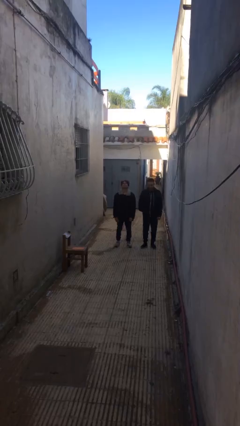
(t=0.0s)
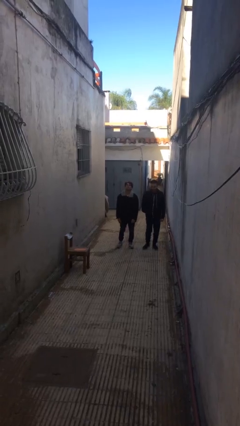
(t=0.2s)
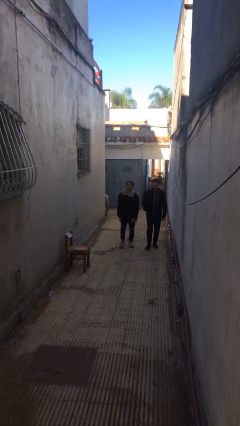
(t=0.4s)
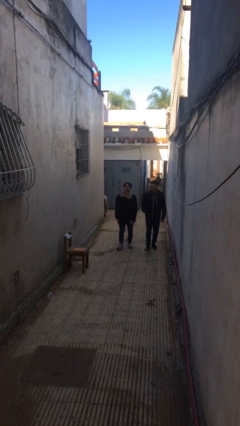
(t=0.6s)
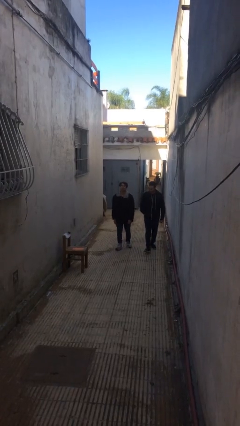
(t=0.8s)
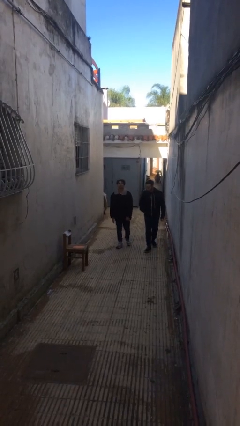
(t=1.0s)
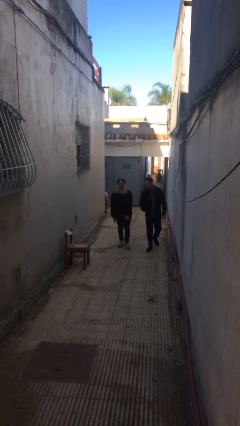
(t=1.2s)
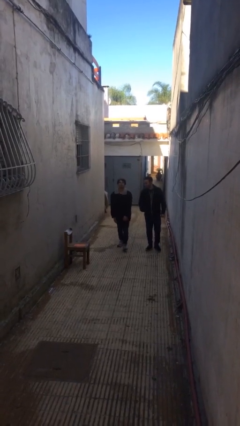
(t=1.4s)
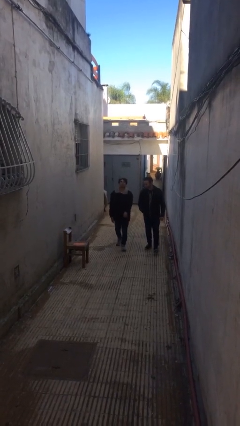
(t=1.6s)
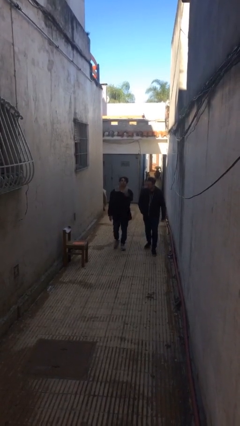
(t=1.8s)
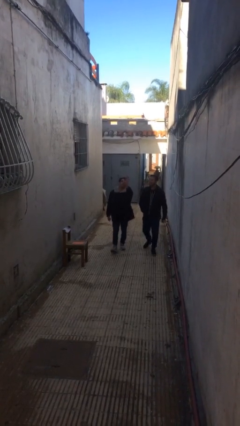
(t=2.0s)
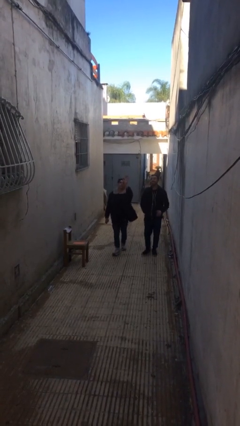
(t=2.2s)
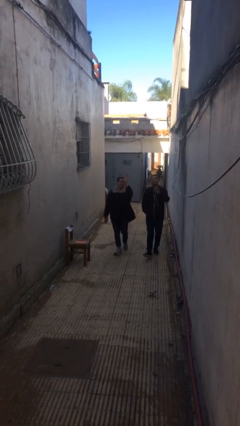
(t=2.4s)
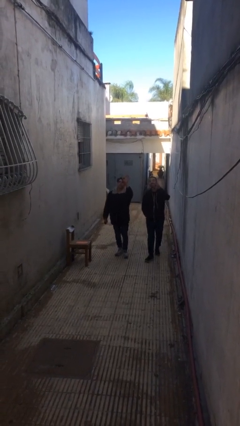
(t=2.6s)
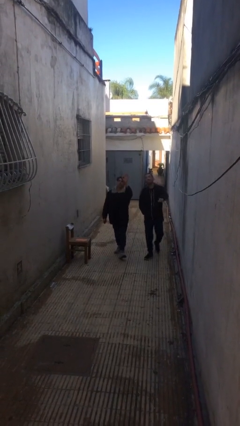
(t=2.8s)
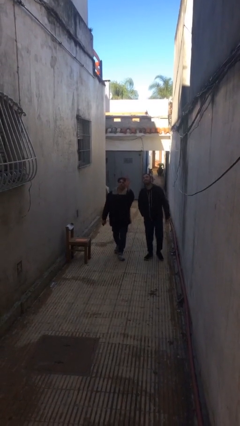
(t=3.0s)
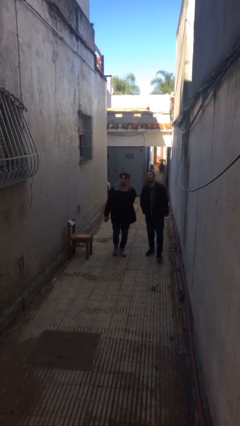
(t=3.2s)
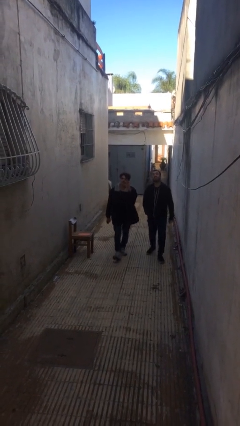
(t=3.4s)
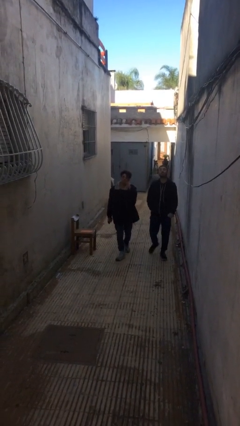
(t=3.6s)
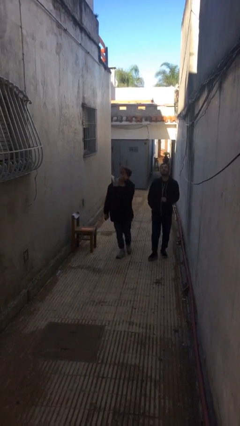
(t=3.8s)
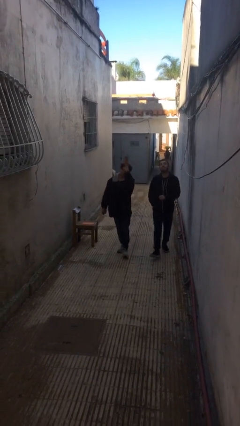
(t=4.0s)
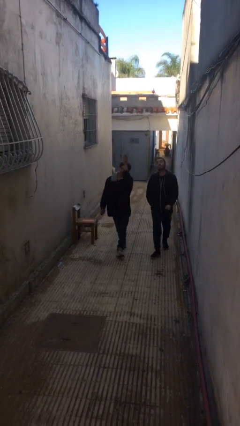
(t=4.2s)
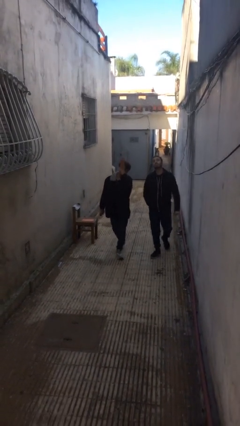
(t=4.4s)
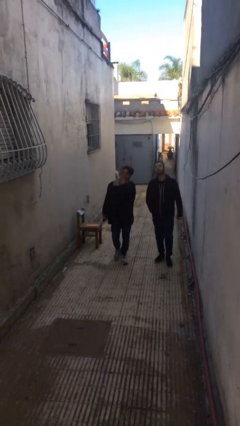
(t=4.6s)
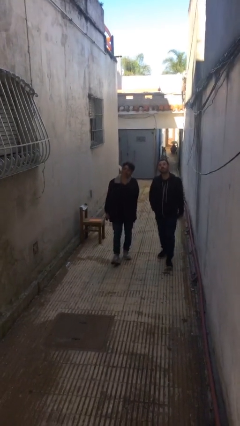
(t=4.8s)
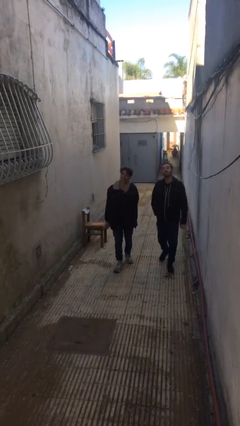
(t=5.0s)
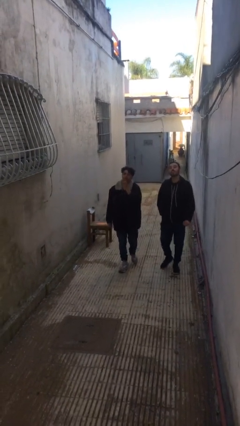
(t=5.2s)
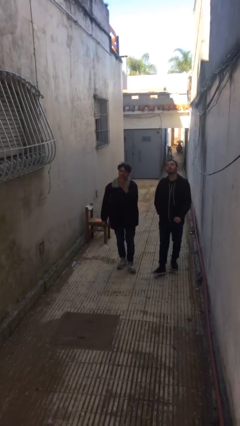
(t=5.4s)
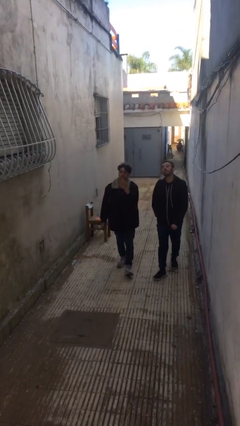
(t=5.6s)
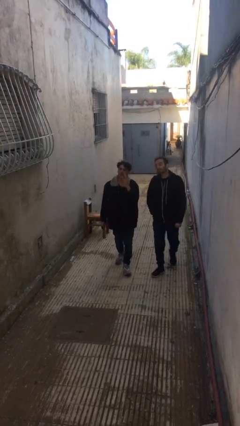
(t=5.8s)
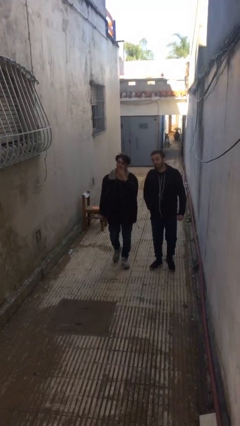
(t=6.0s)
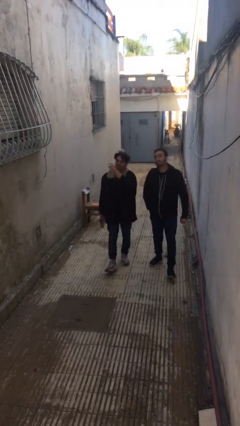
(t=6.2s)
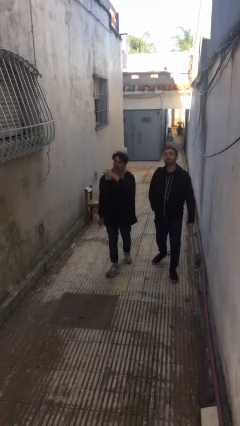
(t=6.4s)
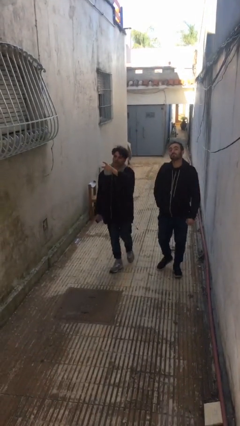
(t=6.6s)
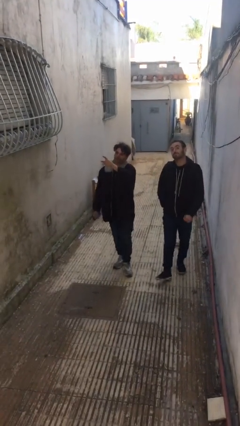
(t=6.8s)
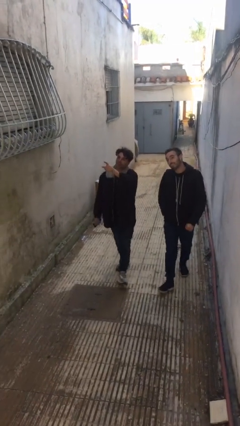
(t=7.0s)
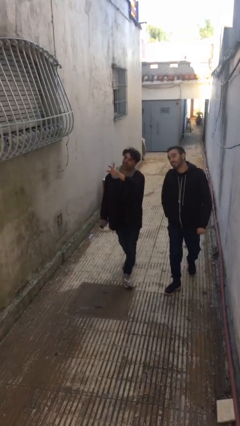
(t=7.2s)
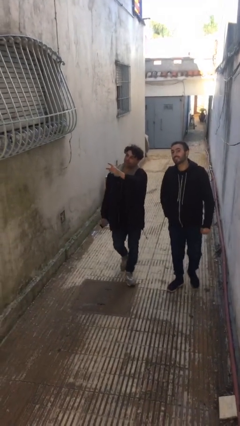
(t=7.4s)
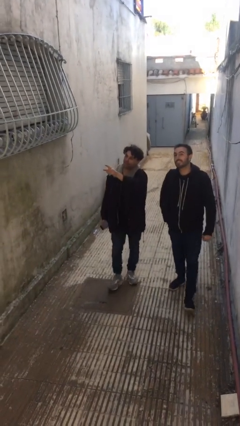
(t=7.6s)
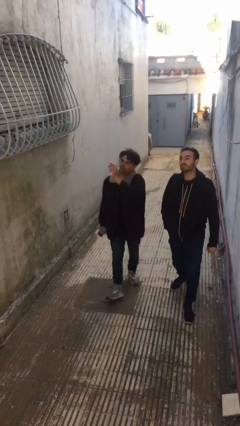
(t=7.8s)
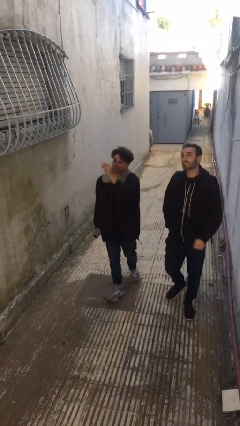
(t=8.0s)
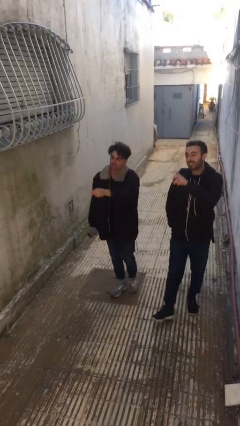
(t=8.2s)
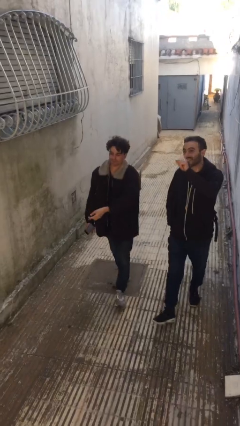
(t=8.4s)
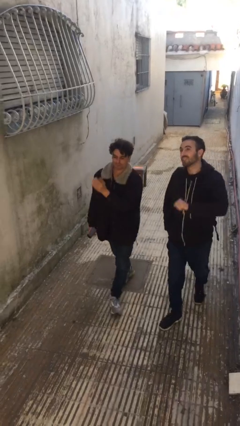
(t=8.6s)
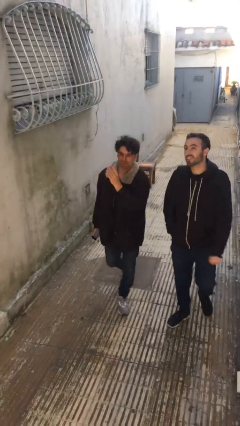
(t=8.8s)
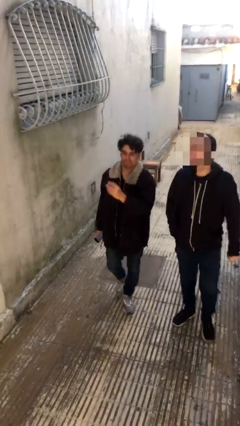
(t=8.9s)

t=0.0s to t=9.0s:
person talks to person

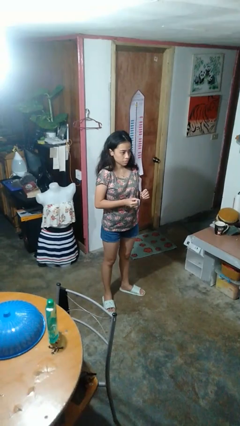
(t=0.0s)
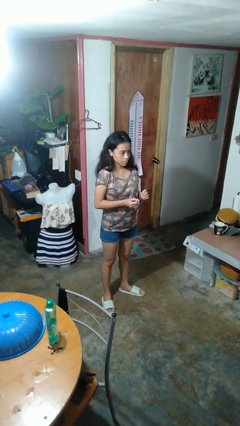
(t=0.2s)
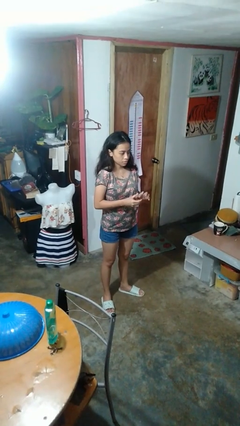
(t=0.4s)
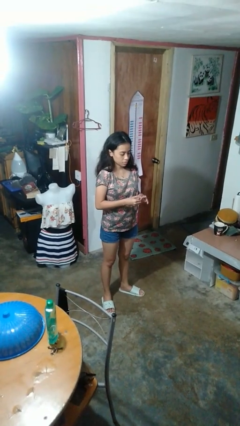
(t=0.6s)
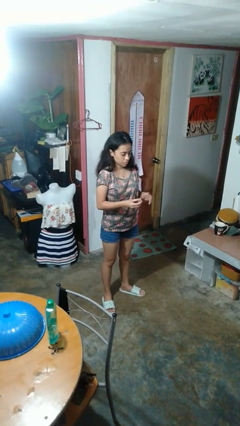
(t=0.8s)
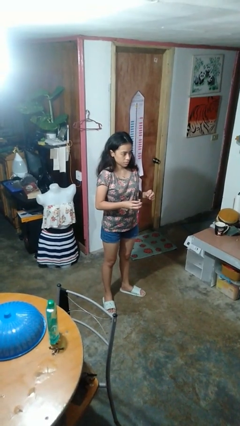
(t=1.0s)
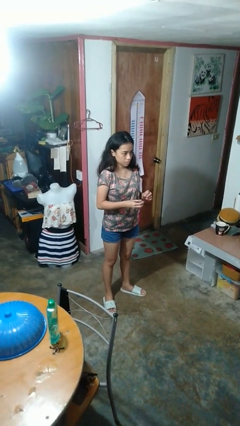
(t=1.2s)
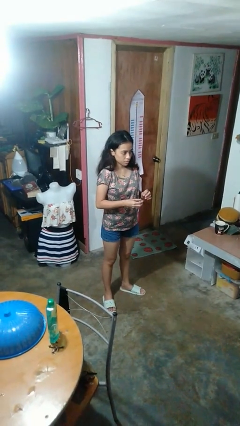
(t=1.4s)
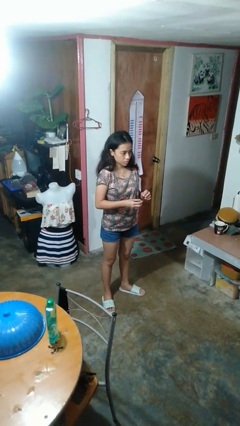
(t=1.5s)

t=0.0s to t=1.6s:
person takes off ring

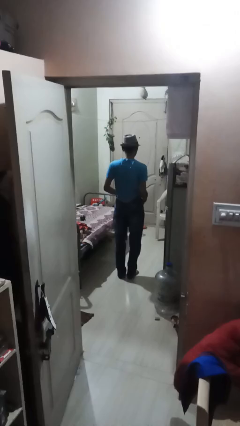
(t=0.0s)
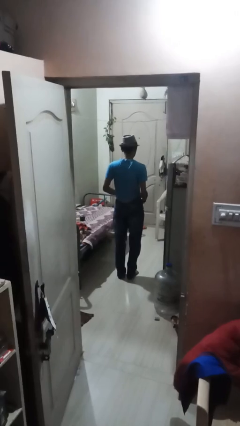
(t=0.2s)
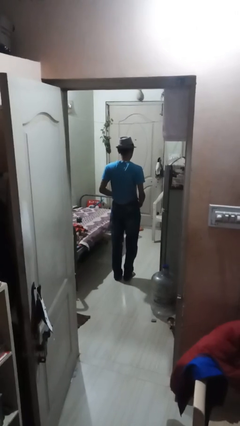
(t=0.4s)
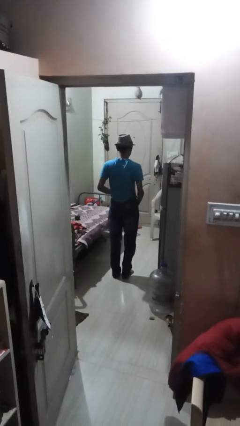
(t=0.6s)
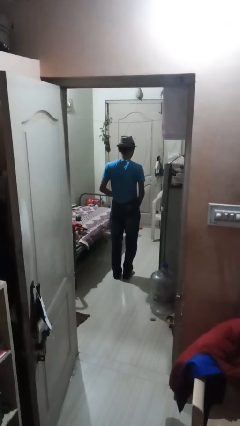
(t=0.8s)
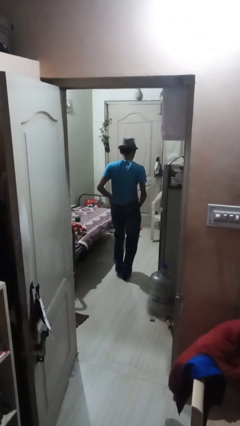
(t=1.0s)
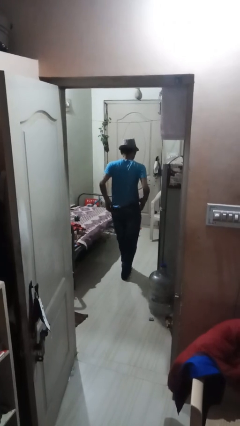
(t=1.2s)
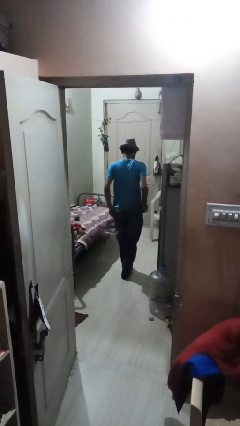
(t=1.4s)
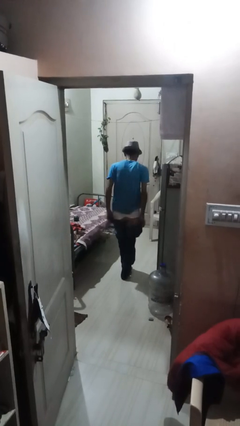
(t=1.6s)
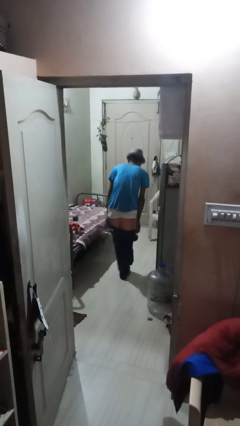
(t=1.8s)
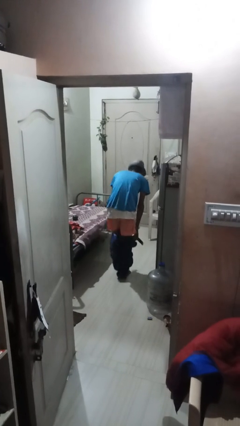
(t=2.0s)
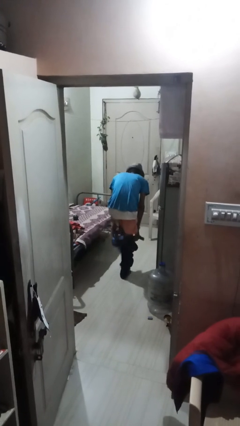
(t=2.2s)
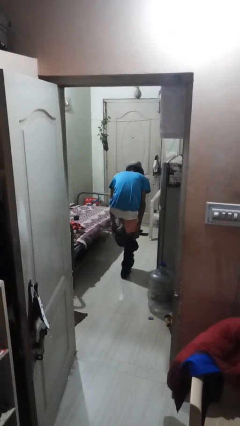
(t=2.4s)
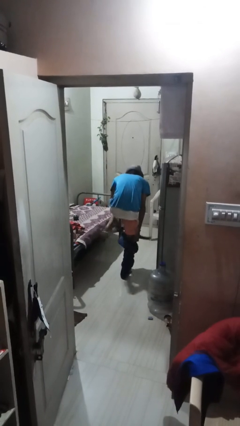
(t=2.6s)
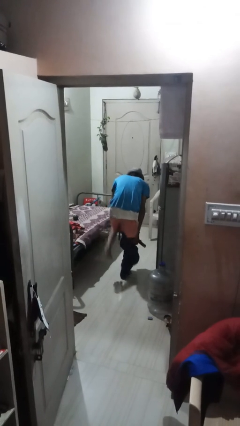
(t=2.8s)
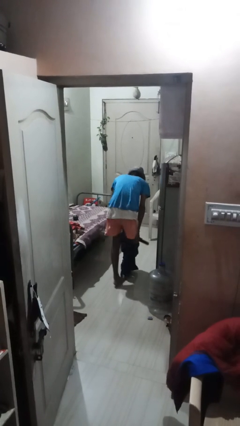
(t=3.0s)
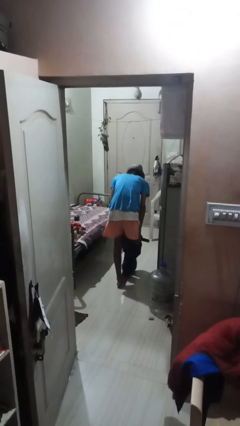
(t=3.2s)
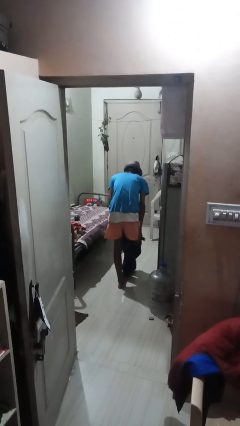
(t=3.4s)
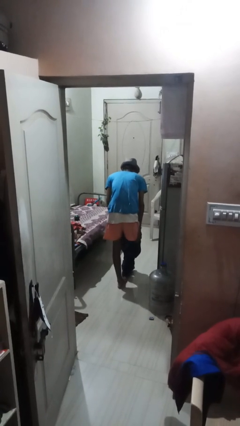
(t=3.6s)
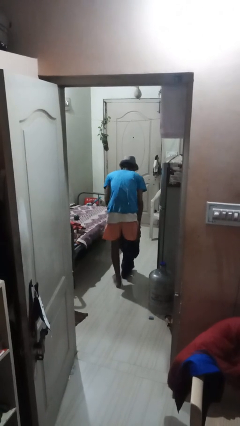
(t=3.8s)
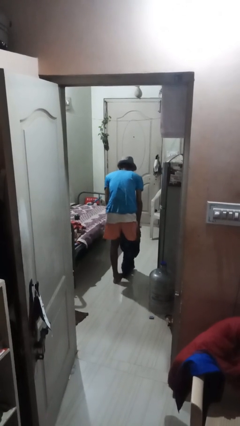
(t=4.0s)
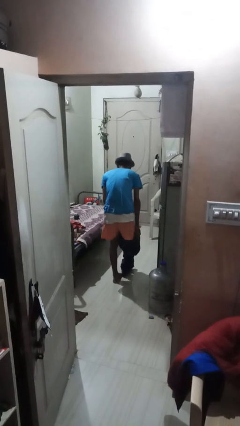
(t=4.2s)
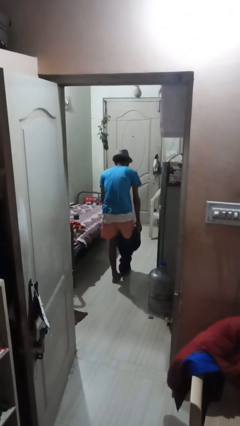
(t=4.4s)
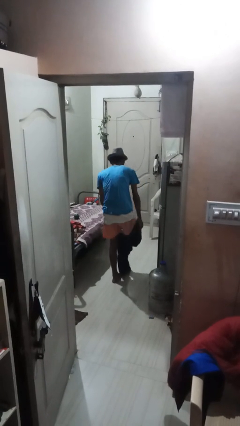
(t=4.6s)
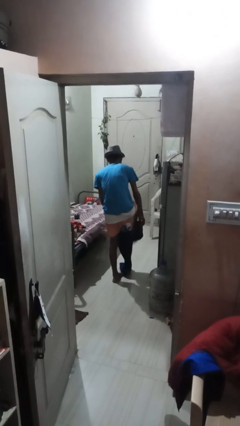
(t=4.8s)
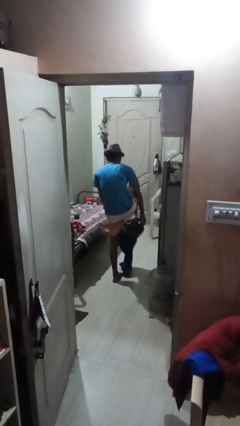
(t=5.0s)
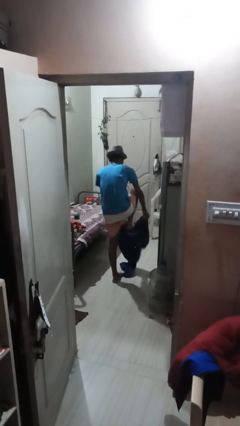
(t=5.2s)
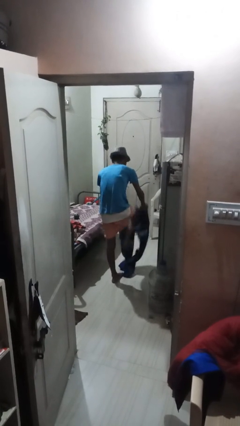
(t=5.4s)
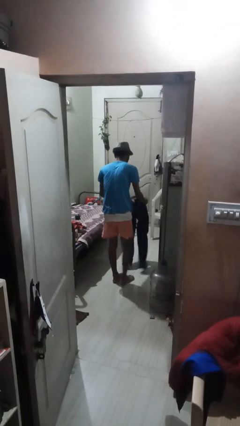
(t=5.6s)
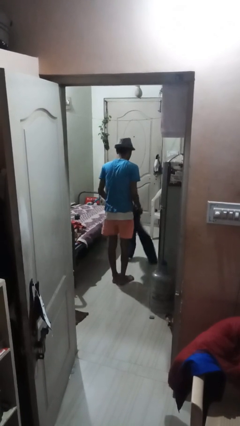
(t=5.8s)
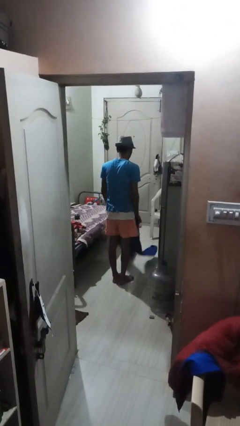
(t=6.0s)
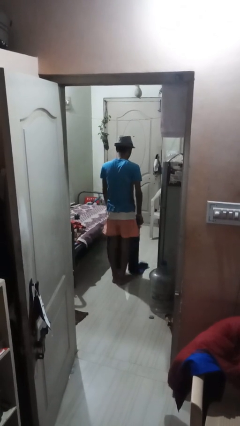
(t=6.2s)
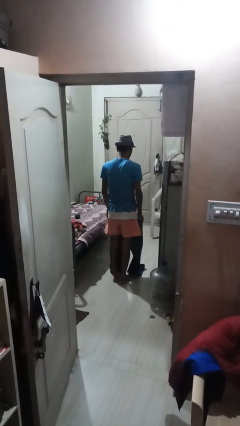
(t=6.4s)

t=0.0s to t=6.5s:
person takes off pants

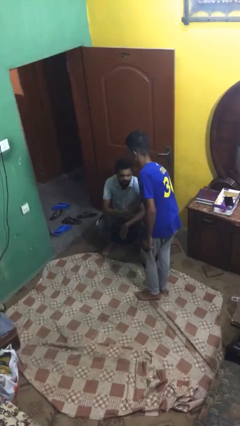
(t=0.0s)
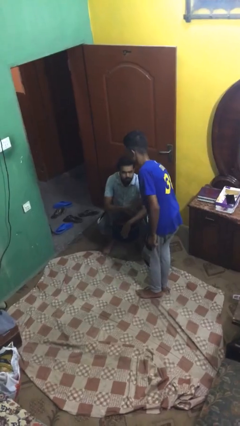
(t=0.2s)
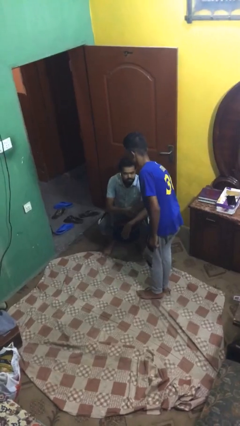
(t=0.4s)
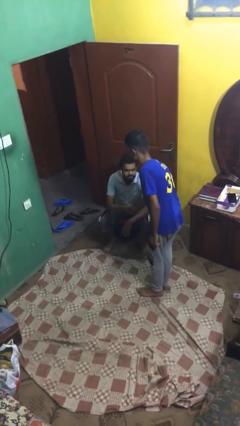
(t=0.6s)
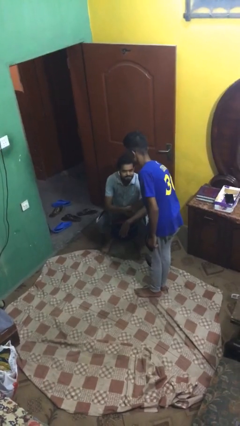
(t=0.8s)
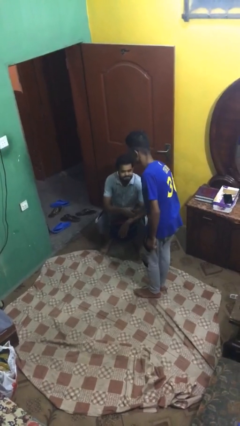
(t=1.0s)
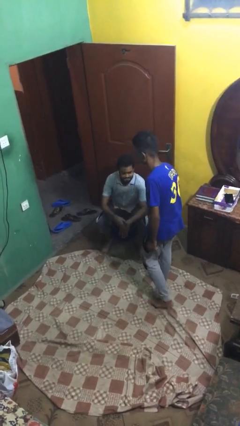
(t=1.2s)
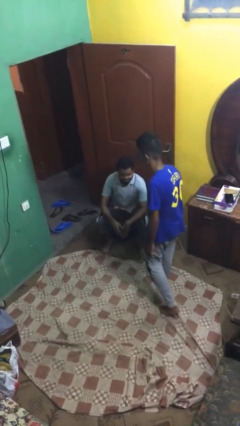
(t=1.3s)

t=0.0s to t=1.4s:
person shakes hand
